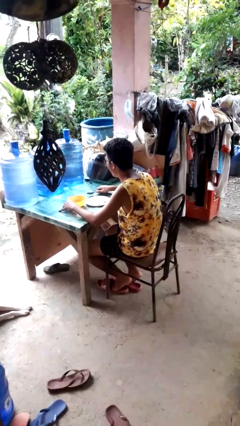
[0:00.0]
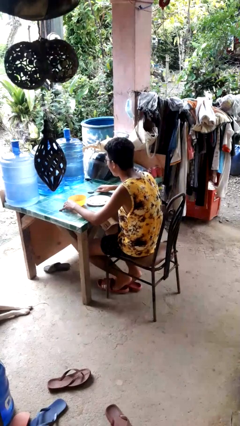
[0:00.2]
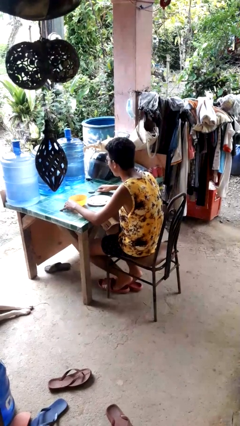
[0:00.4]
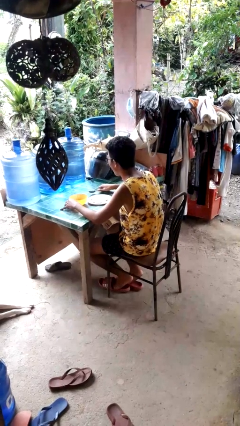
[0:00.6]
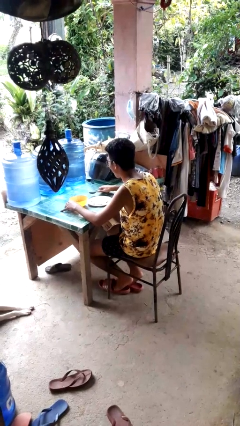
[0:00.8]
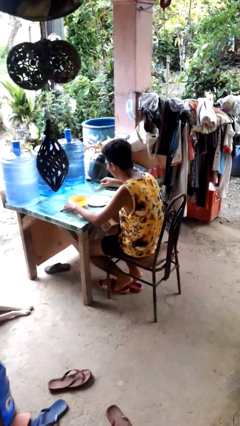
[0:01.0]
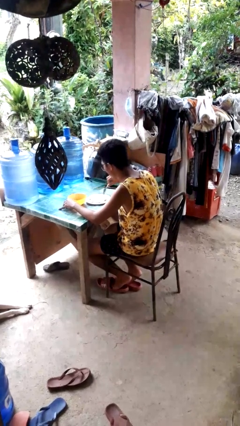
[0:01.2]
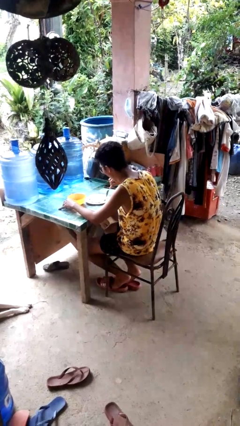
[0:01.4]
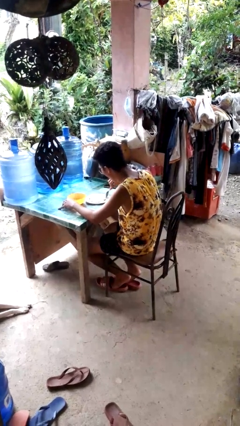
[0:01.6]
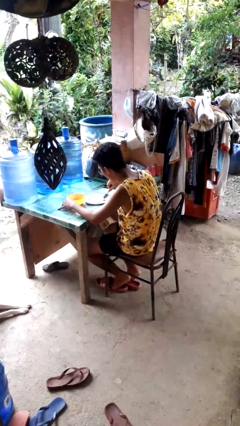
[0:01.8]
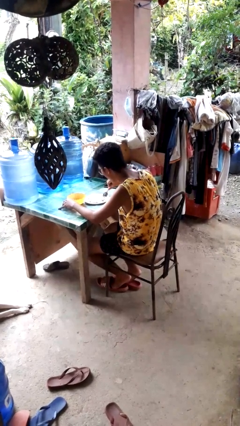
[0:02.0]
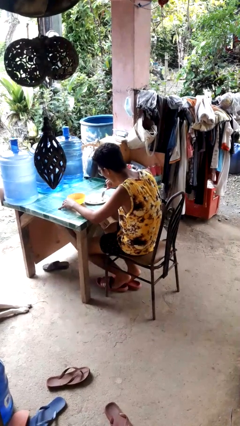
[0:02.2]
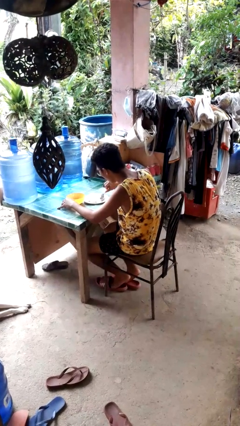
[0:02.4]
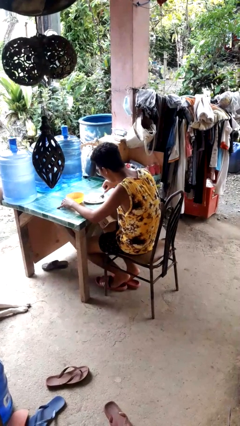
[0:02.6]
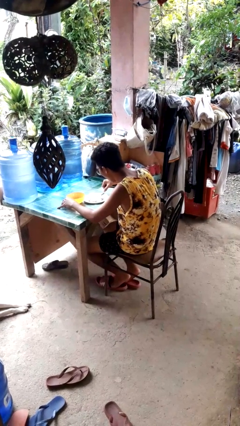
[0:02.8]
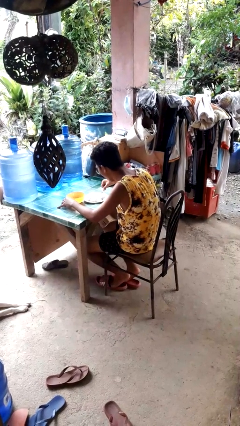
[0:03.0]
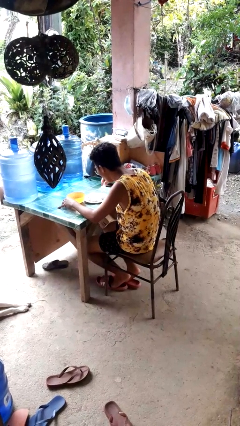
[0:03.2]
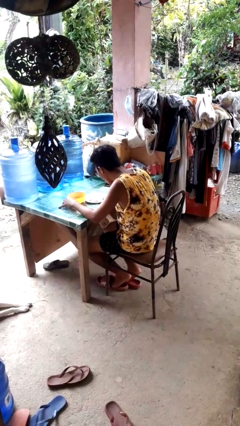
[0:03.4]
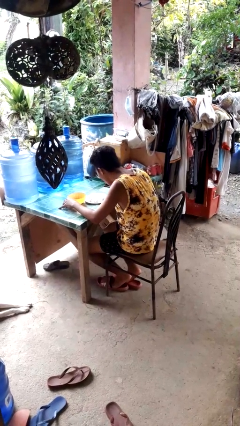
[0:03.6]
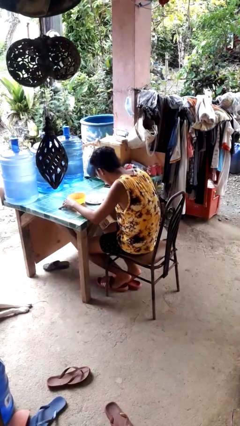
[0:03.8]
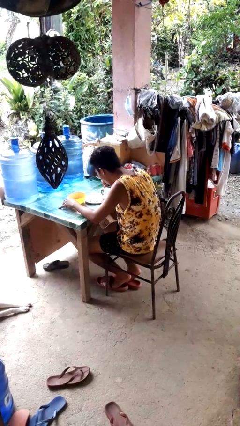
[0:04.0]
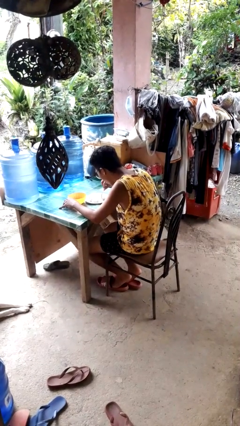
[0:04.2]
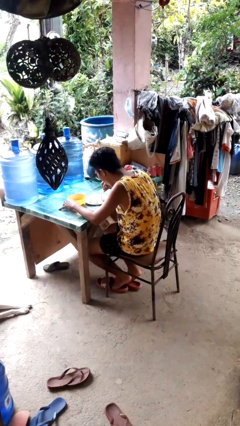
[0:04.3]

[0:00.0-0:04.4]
person eats with utensil

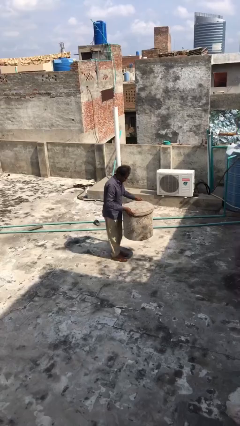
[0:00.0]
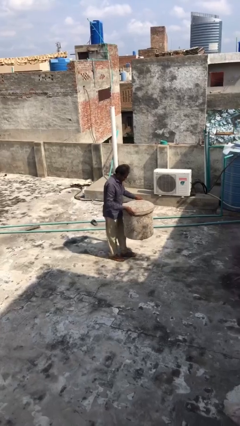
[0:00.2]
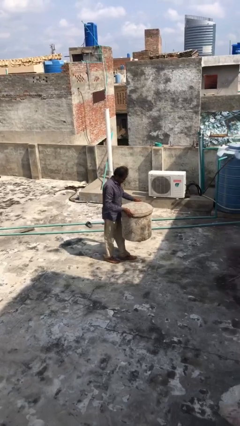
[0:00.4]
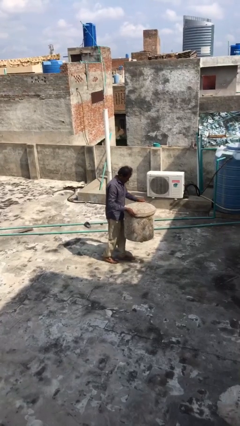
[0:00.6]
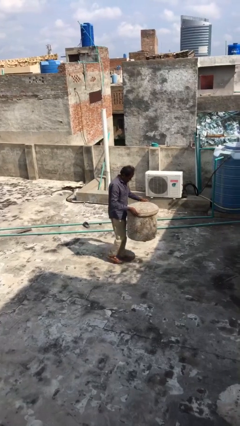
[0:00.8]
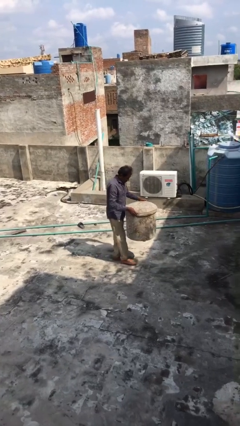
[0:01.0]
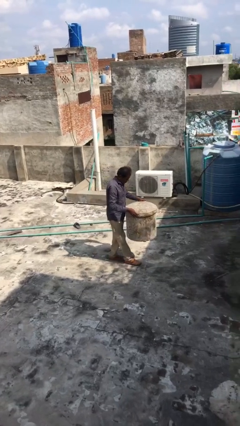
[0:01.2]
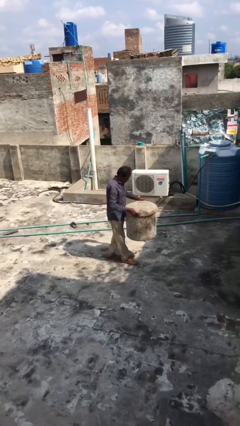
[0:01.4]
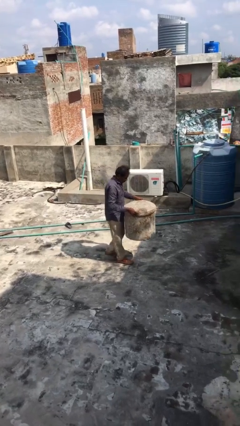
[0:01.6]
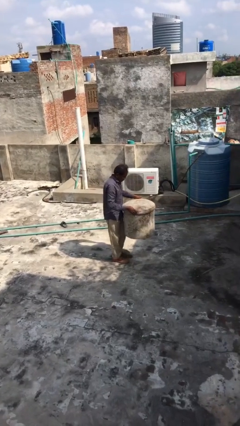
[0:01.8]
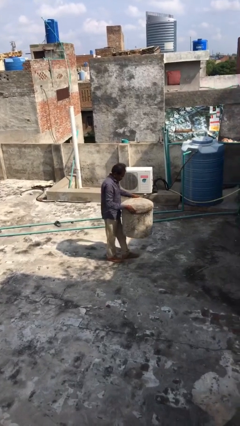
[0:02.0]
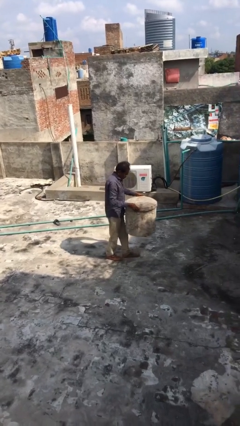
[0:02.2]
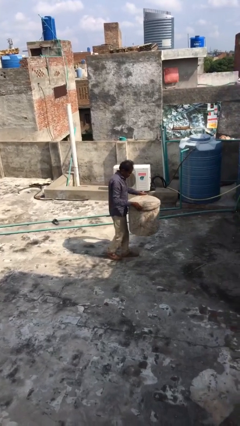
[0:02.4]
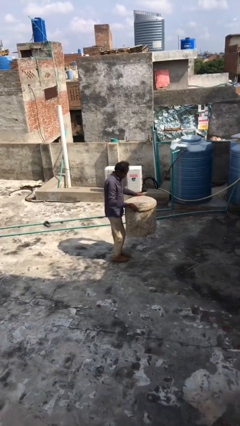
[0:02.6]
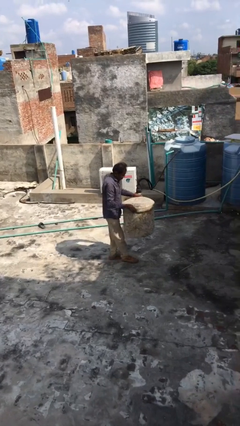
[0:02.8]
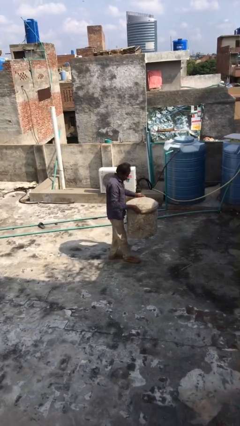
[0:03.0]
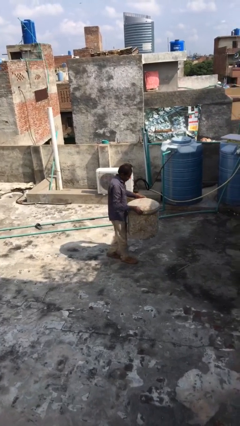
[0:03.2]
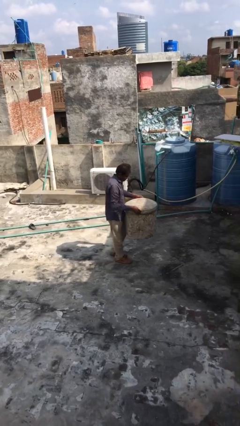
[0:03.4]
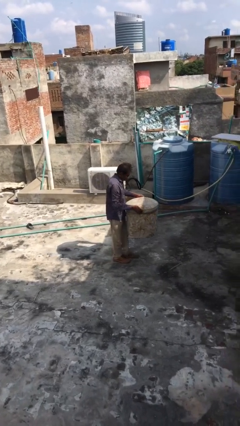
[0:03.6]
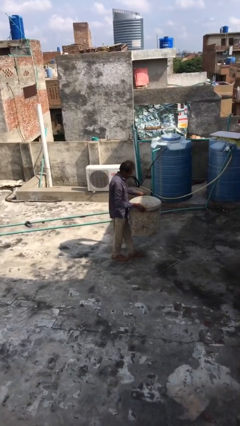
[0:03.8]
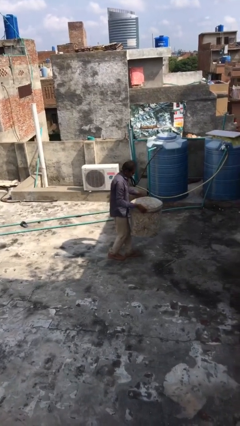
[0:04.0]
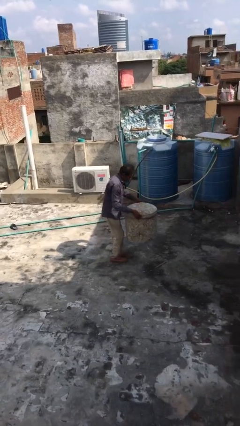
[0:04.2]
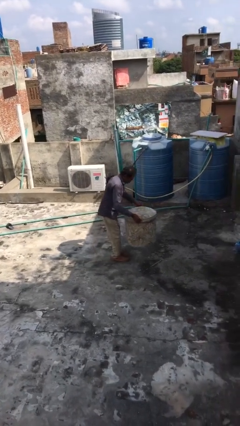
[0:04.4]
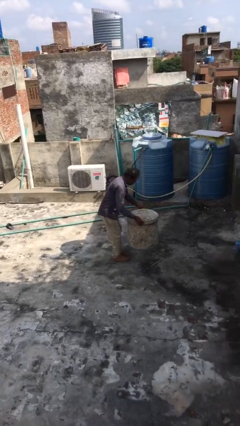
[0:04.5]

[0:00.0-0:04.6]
person carries heavy object

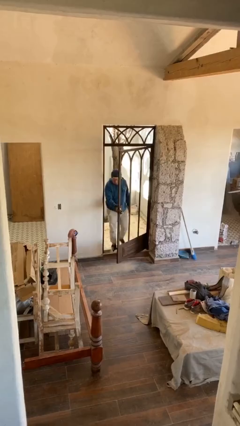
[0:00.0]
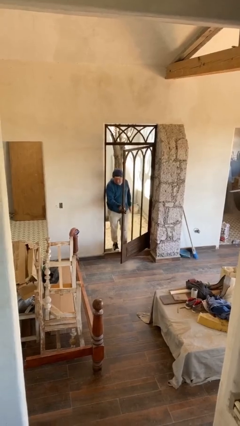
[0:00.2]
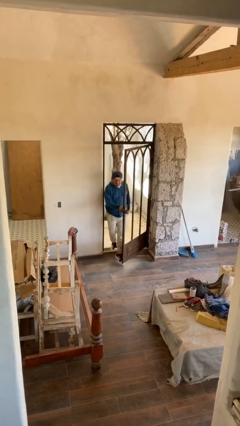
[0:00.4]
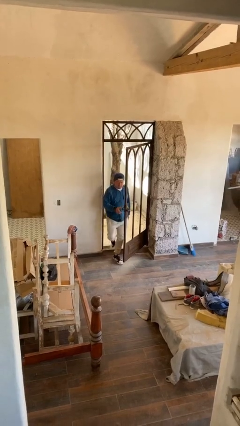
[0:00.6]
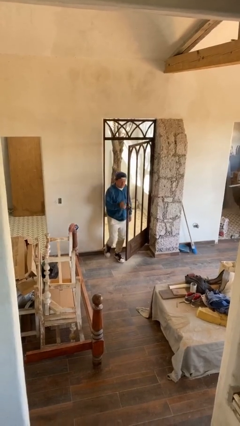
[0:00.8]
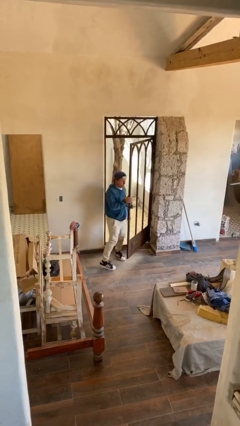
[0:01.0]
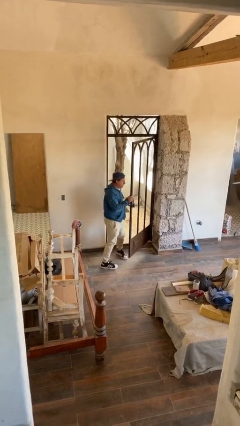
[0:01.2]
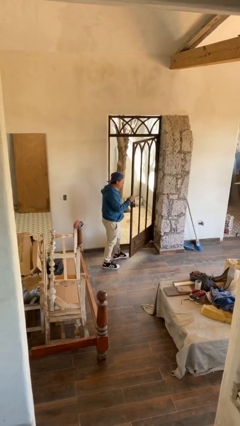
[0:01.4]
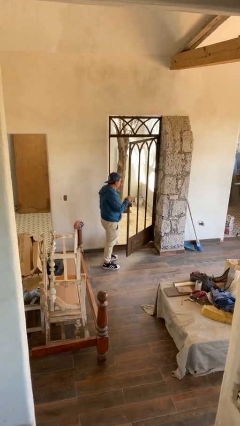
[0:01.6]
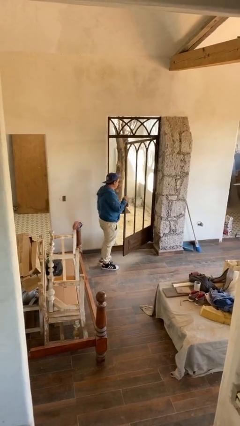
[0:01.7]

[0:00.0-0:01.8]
person enters scene through structure

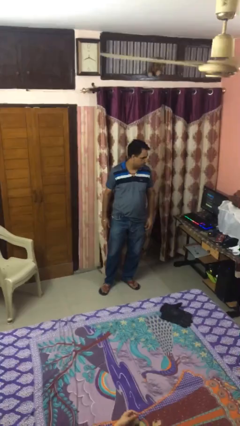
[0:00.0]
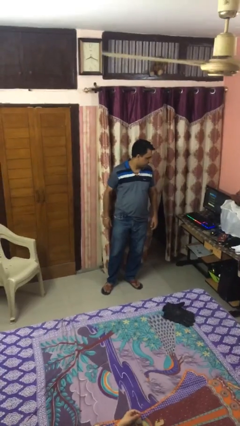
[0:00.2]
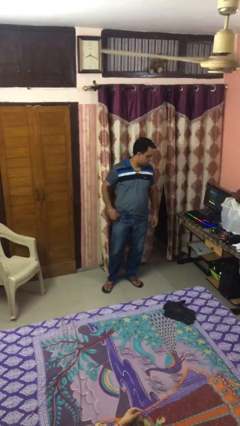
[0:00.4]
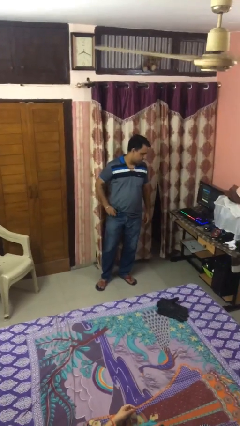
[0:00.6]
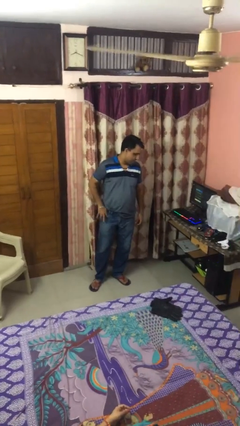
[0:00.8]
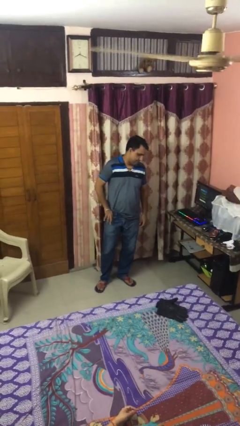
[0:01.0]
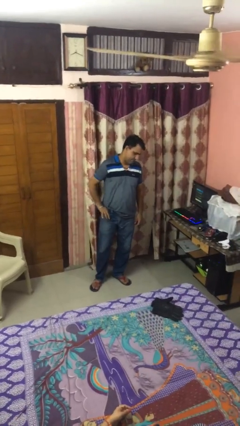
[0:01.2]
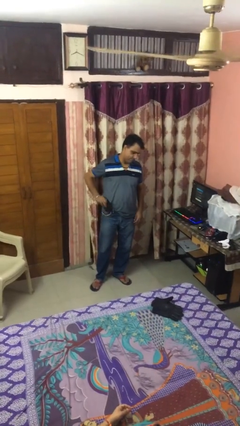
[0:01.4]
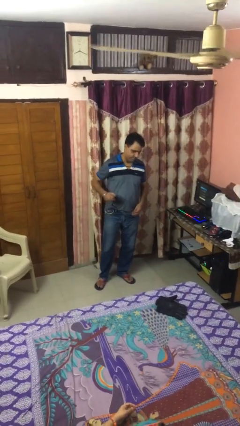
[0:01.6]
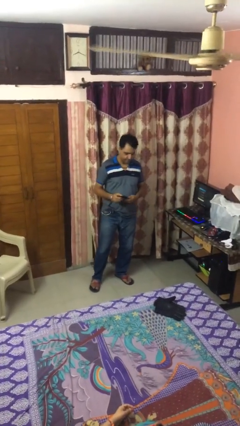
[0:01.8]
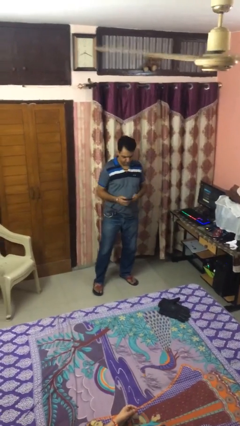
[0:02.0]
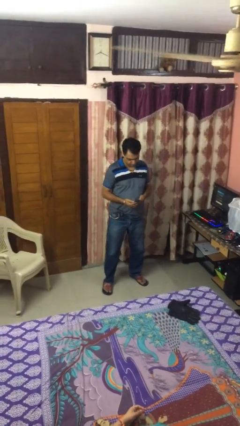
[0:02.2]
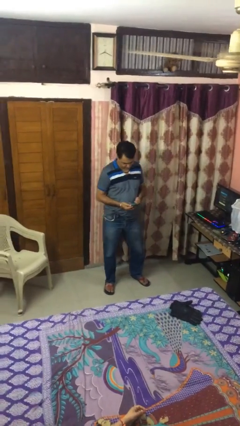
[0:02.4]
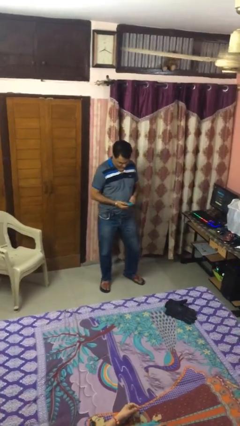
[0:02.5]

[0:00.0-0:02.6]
person takes phone from pocket

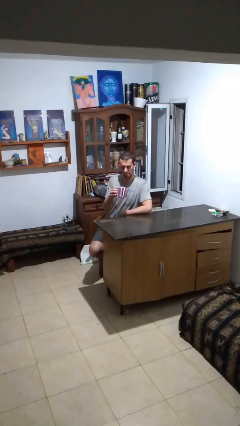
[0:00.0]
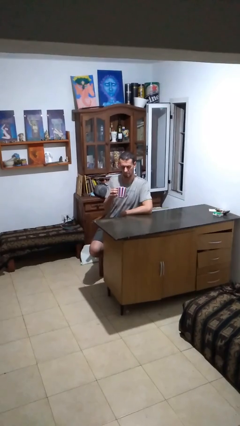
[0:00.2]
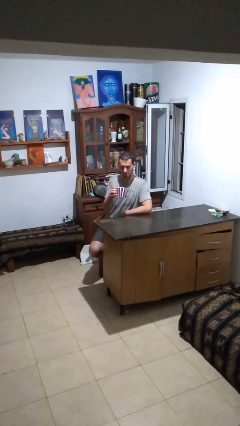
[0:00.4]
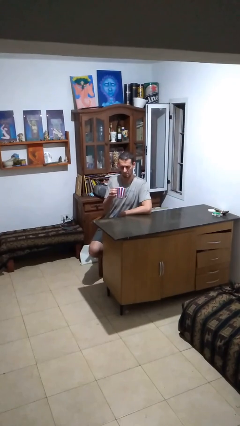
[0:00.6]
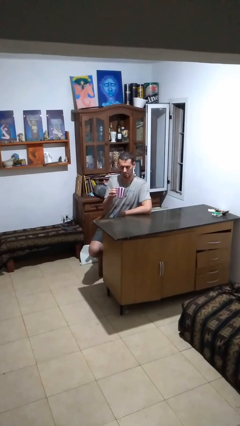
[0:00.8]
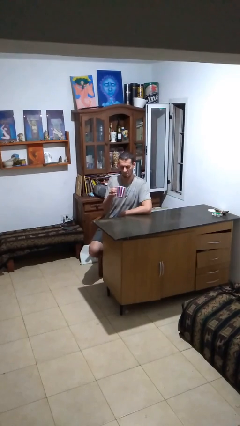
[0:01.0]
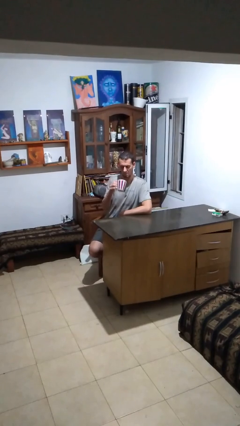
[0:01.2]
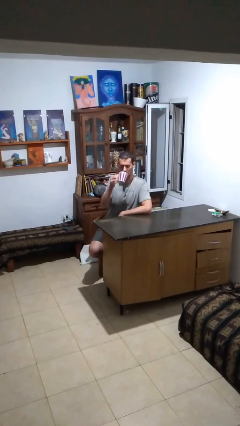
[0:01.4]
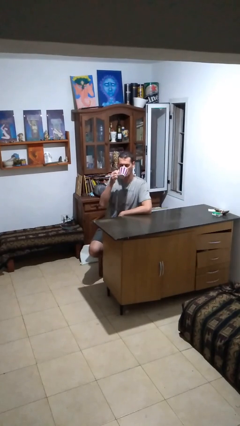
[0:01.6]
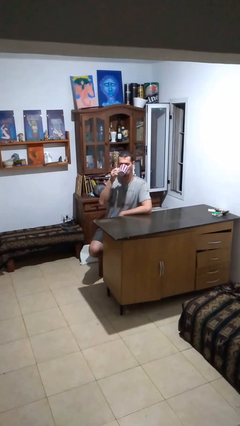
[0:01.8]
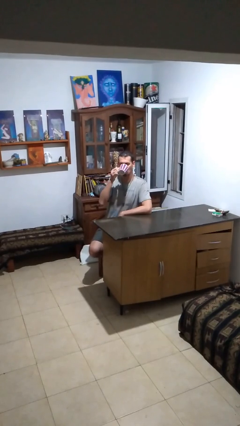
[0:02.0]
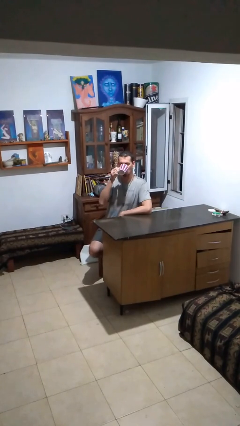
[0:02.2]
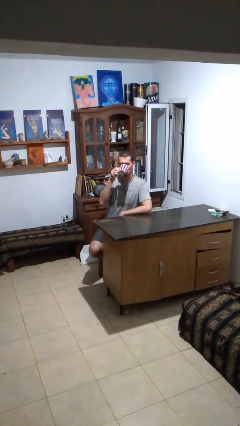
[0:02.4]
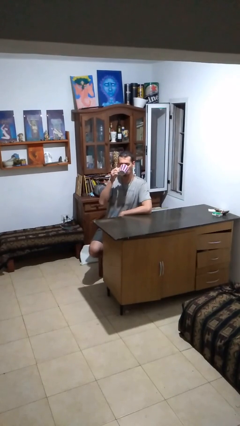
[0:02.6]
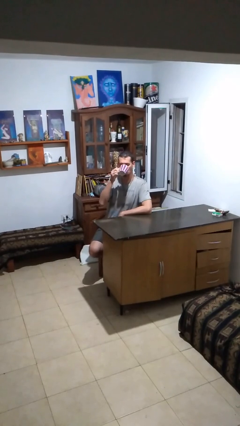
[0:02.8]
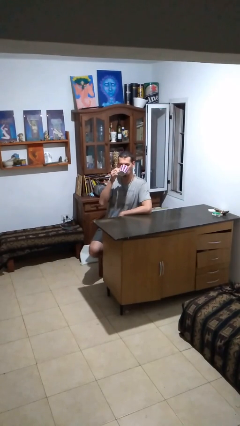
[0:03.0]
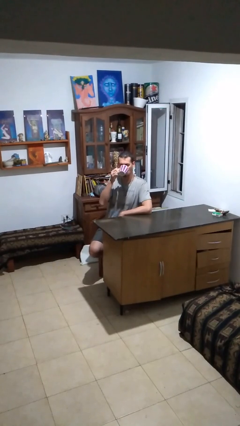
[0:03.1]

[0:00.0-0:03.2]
person drinks from mug

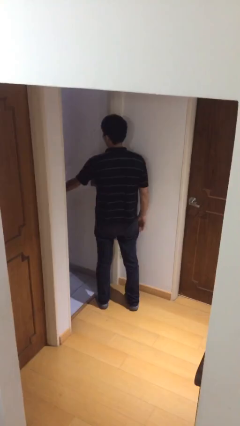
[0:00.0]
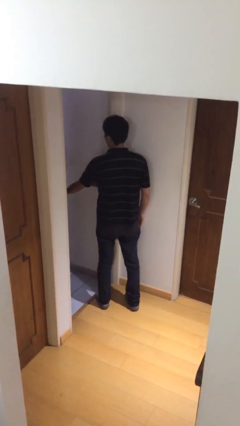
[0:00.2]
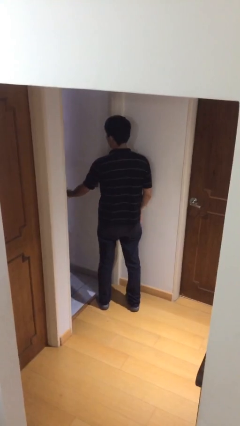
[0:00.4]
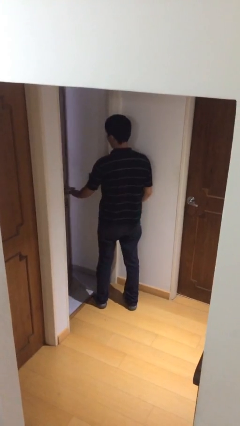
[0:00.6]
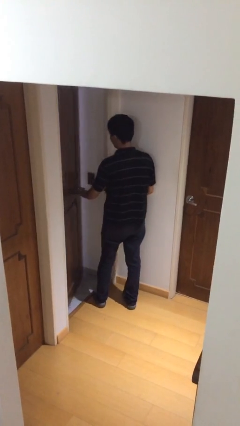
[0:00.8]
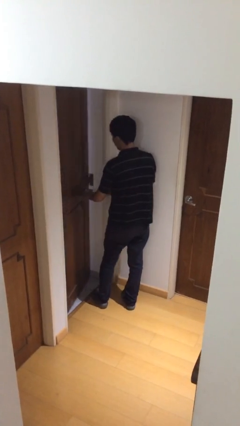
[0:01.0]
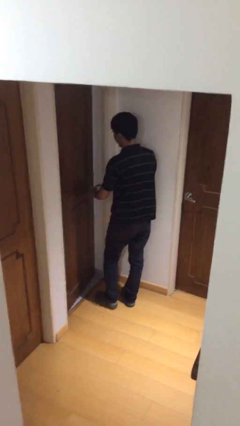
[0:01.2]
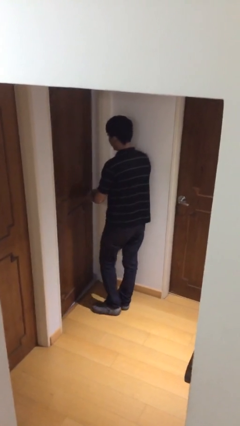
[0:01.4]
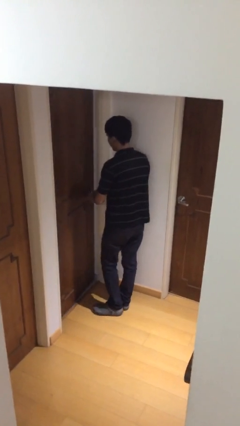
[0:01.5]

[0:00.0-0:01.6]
person closes facility door
